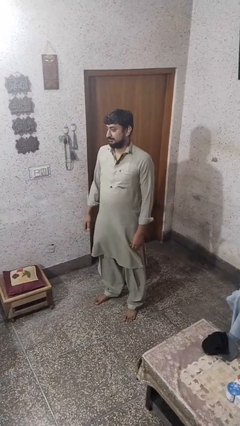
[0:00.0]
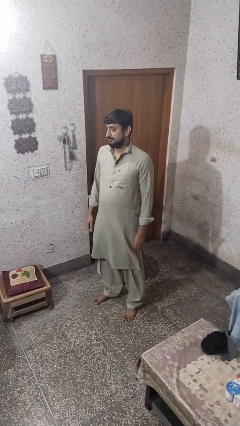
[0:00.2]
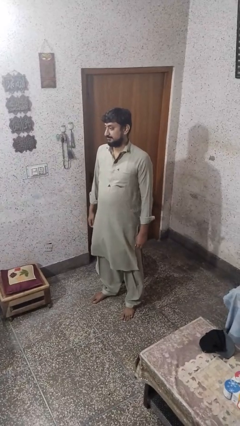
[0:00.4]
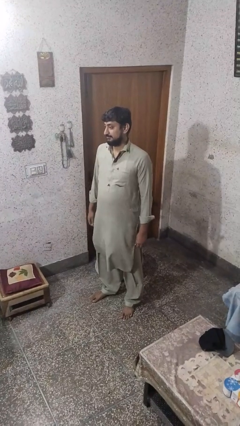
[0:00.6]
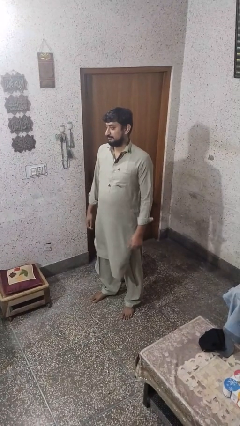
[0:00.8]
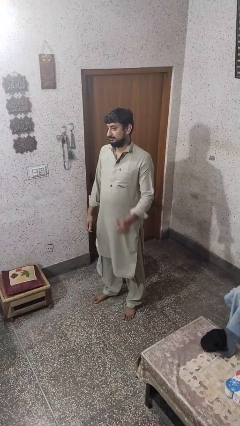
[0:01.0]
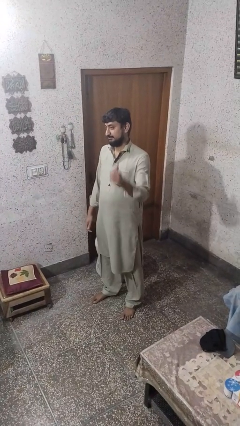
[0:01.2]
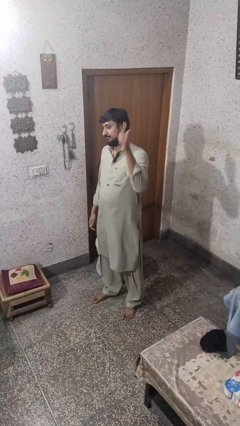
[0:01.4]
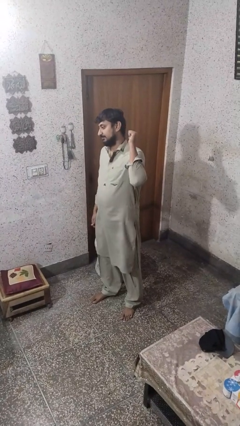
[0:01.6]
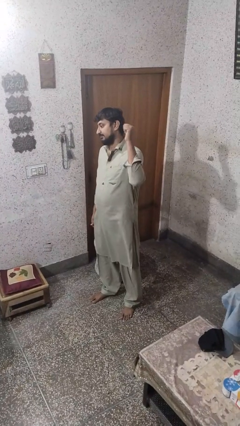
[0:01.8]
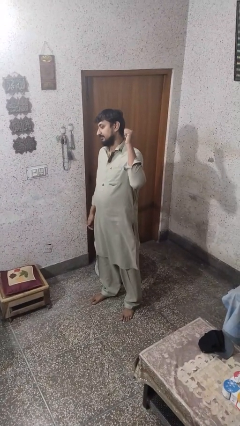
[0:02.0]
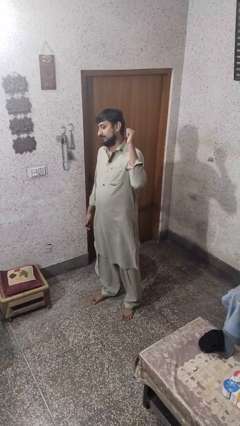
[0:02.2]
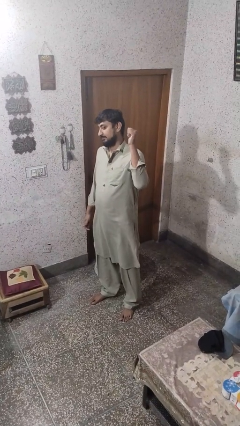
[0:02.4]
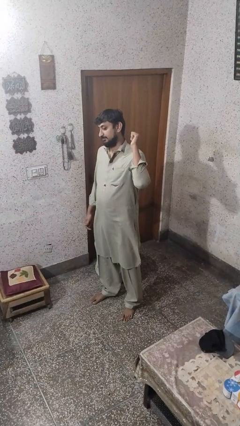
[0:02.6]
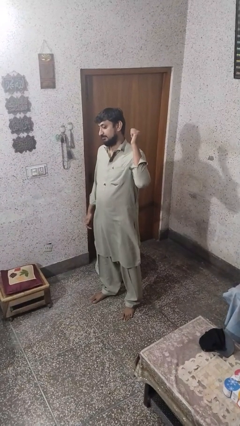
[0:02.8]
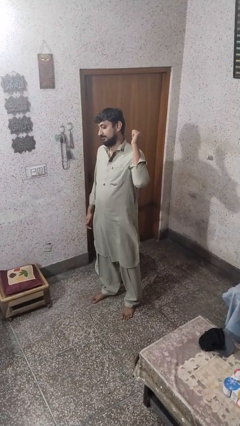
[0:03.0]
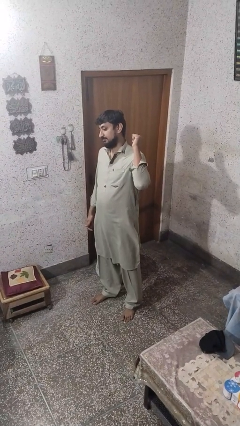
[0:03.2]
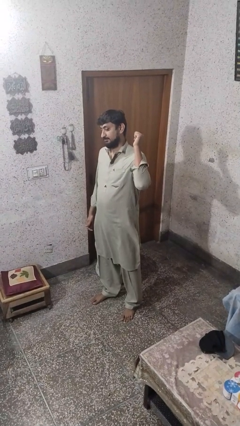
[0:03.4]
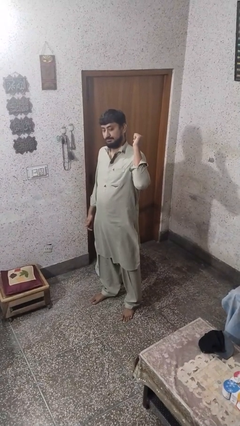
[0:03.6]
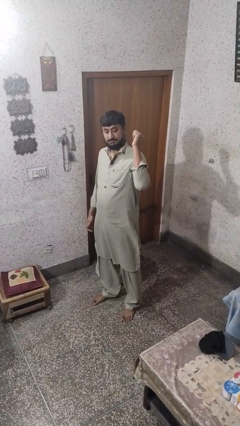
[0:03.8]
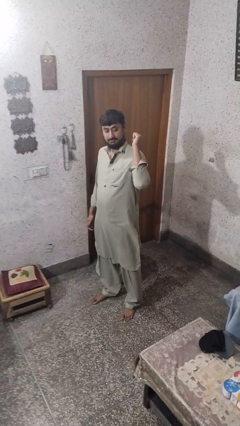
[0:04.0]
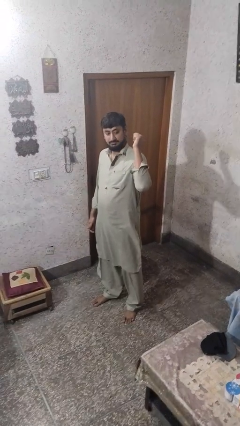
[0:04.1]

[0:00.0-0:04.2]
person gestures behind me

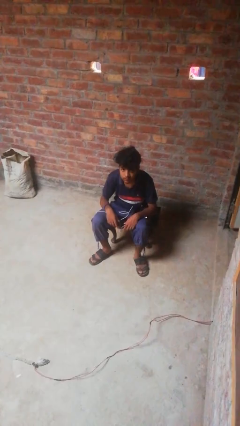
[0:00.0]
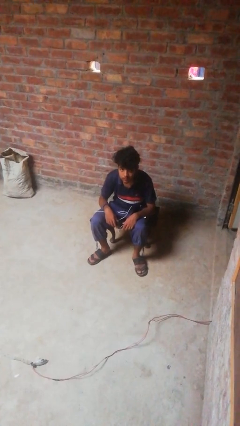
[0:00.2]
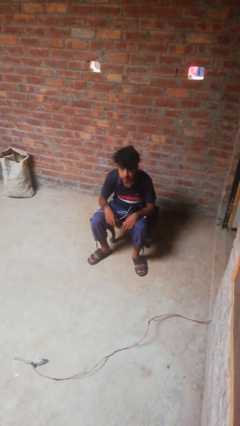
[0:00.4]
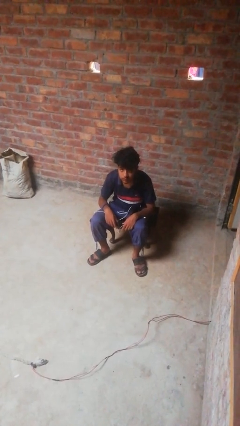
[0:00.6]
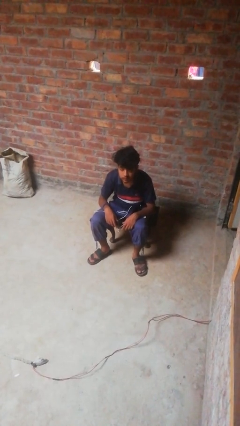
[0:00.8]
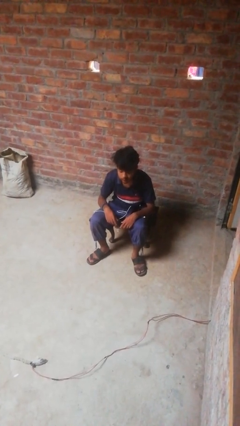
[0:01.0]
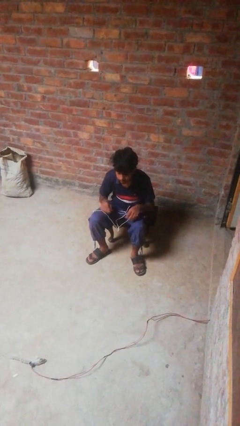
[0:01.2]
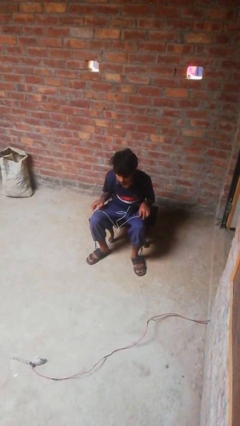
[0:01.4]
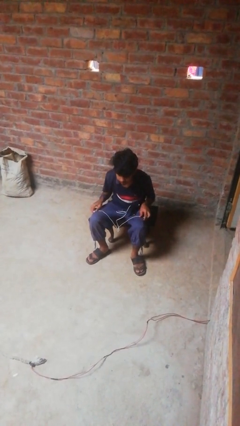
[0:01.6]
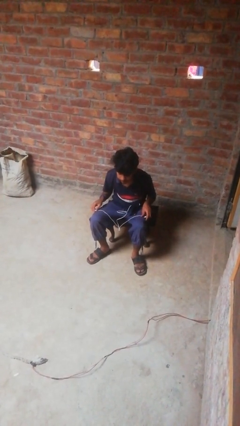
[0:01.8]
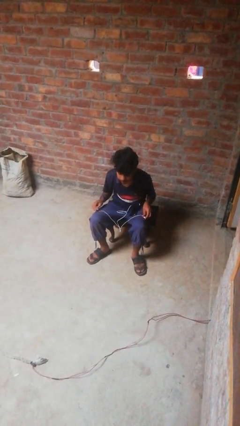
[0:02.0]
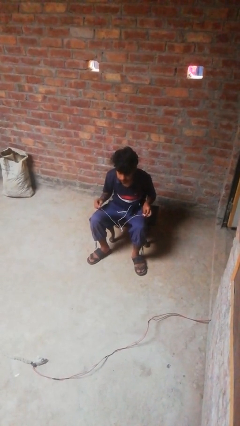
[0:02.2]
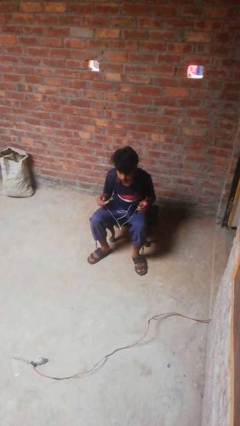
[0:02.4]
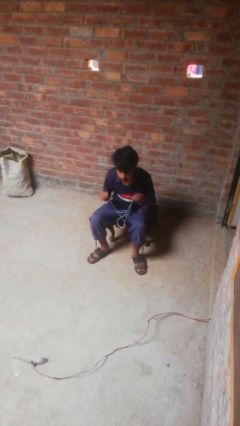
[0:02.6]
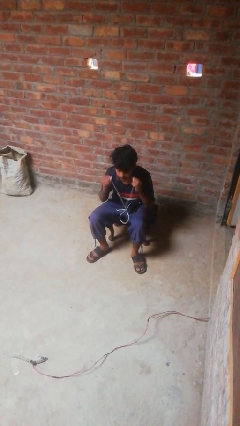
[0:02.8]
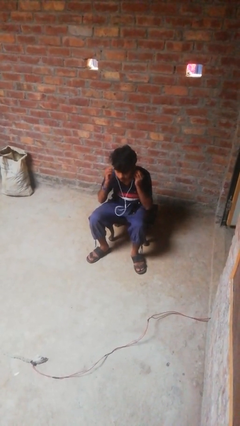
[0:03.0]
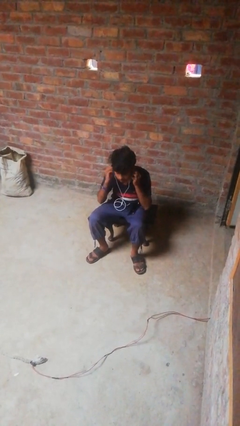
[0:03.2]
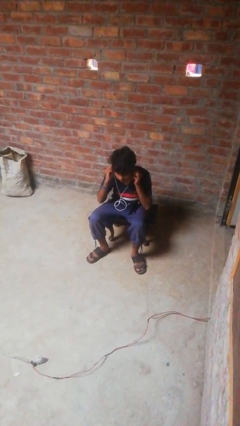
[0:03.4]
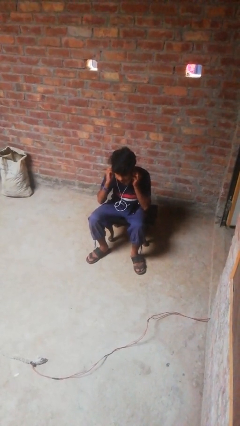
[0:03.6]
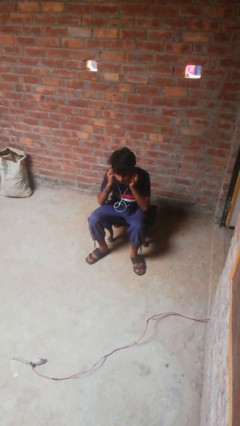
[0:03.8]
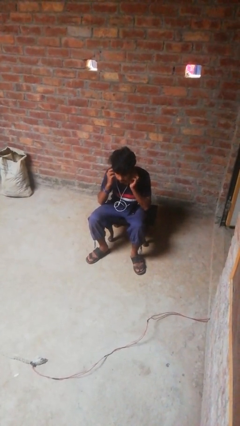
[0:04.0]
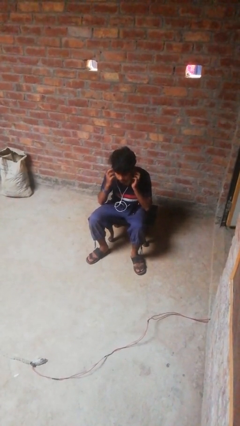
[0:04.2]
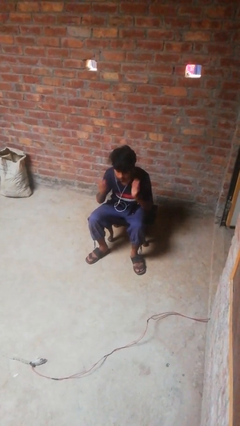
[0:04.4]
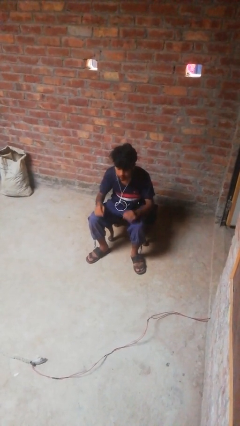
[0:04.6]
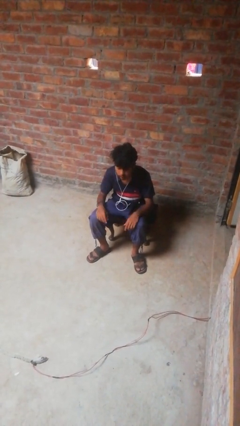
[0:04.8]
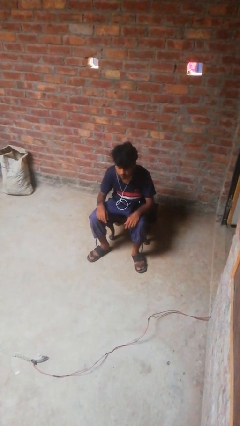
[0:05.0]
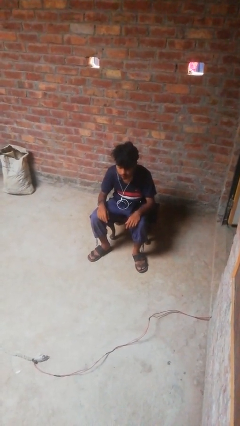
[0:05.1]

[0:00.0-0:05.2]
person puts on headphones

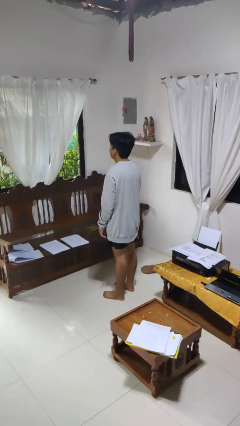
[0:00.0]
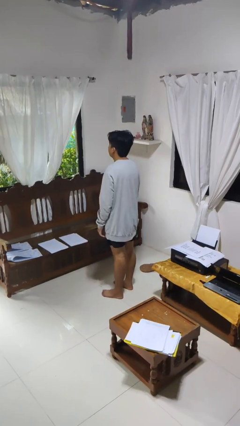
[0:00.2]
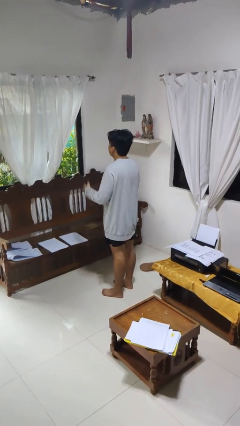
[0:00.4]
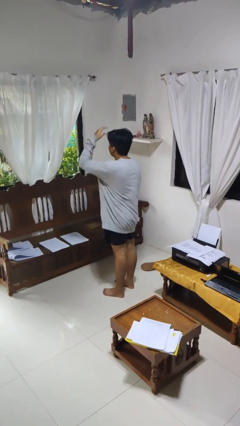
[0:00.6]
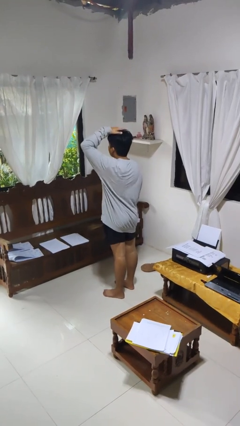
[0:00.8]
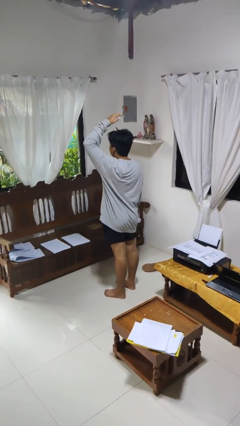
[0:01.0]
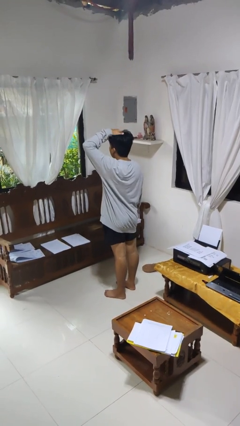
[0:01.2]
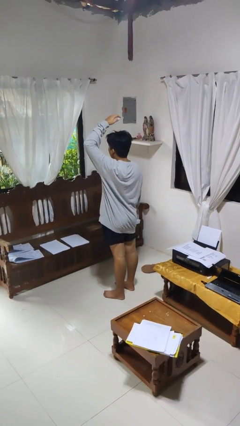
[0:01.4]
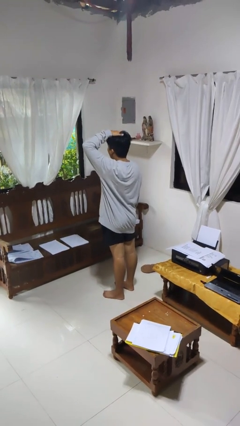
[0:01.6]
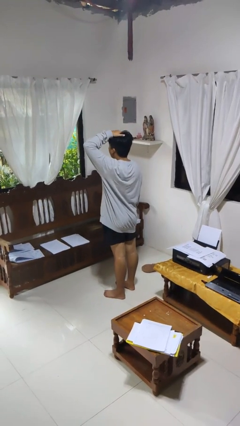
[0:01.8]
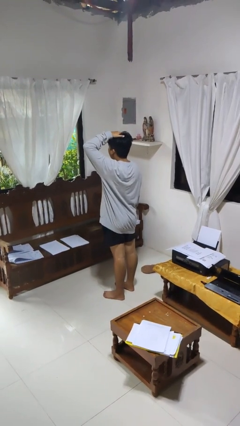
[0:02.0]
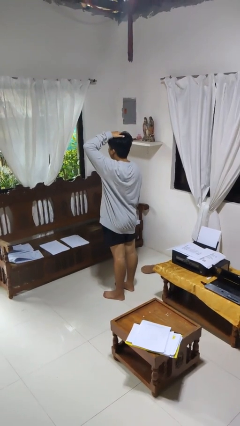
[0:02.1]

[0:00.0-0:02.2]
person pats head

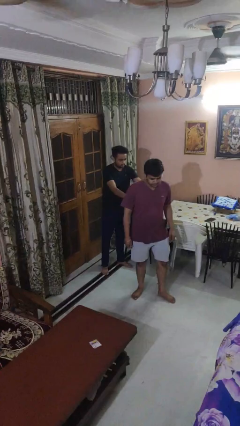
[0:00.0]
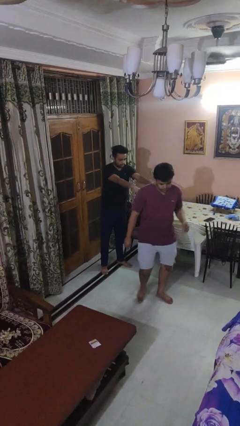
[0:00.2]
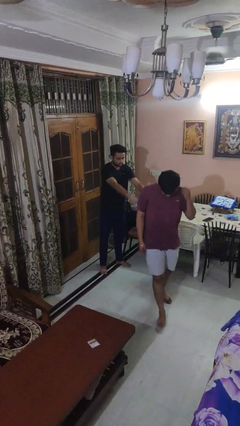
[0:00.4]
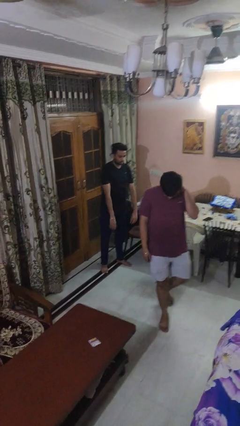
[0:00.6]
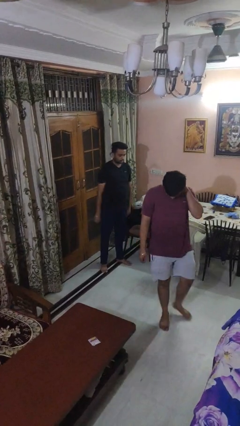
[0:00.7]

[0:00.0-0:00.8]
person shoves person

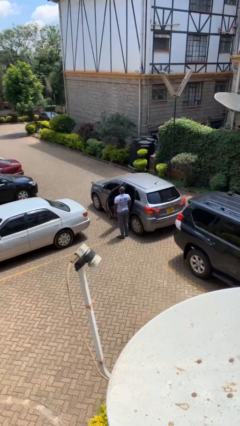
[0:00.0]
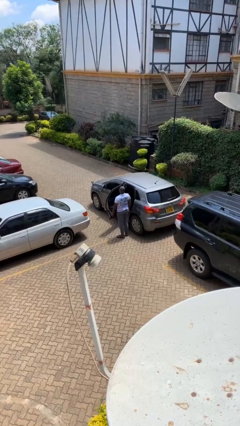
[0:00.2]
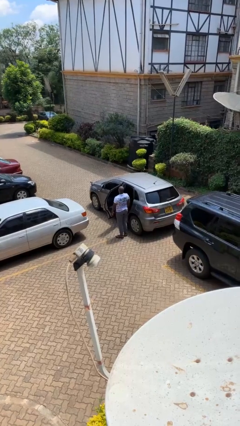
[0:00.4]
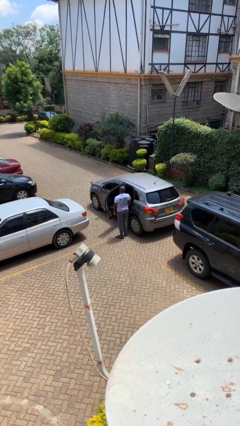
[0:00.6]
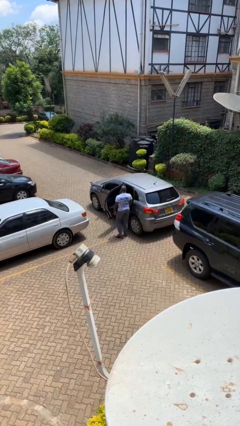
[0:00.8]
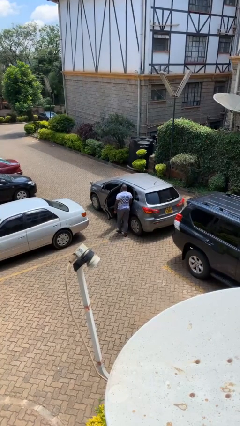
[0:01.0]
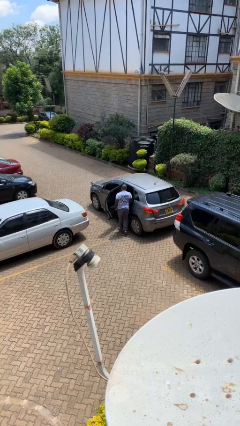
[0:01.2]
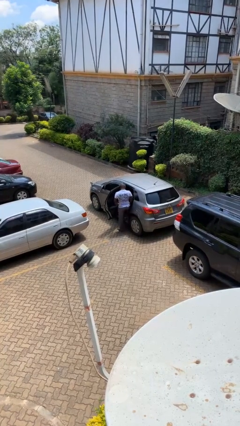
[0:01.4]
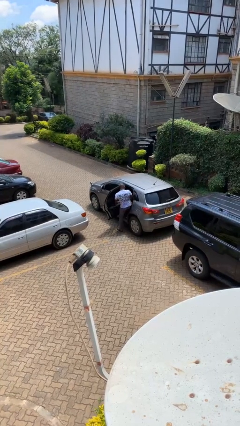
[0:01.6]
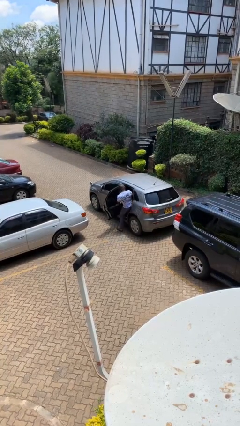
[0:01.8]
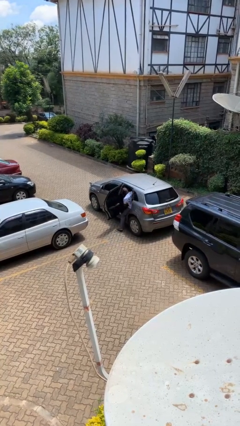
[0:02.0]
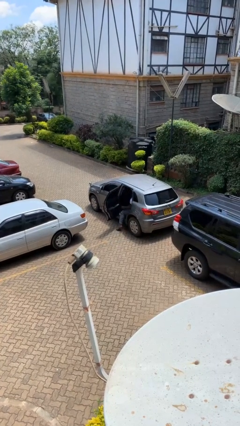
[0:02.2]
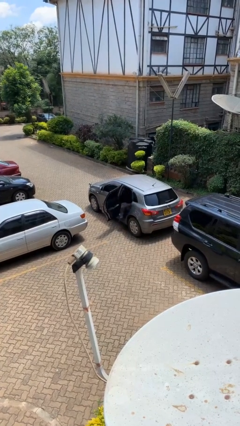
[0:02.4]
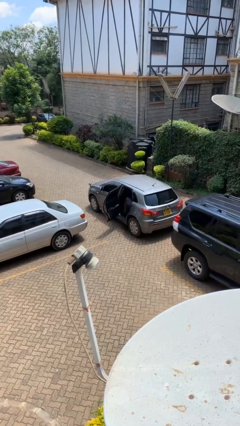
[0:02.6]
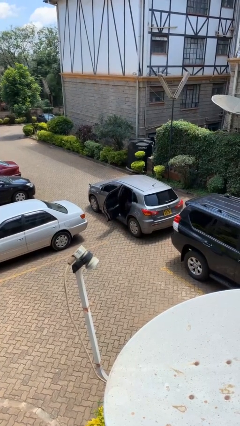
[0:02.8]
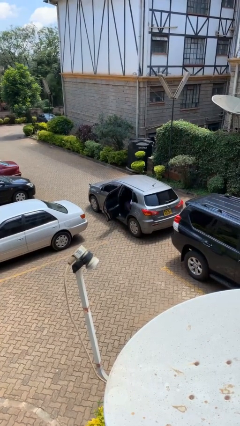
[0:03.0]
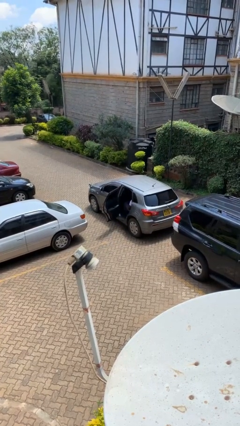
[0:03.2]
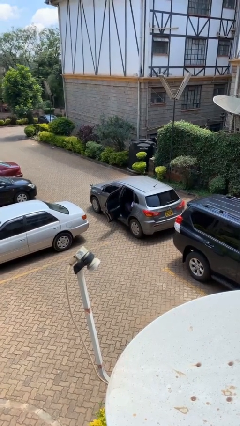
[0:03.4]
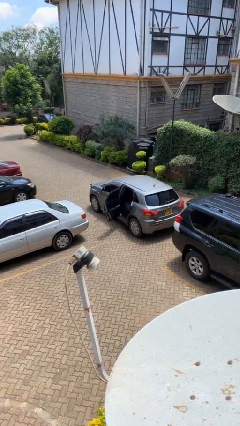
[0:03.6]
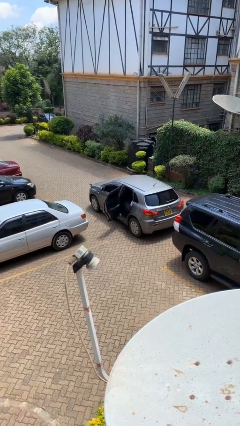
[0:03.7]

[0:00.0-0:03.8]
person enters car

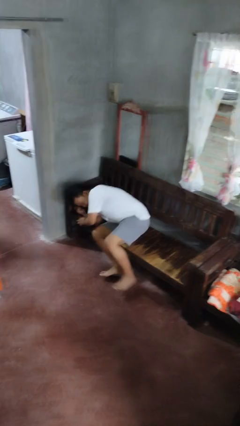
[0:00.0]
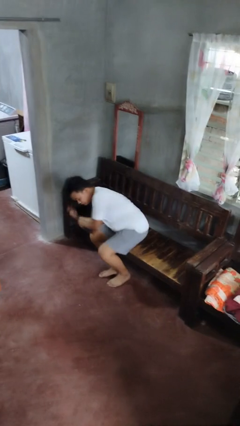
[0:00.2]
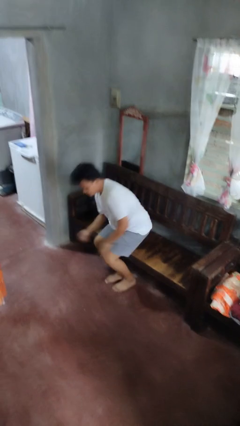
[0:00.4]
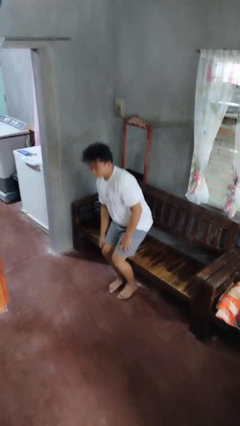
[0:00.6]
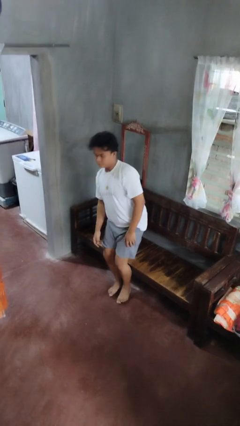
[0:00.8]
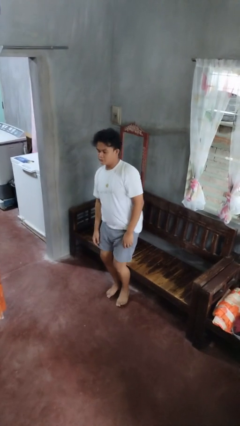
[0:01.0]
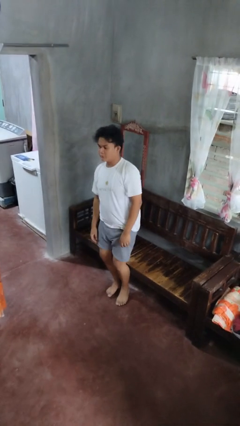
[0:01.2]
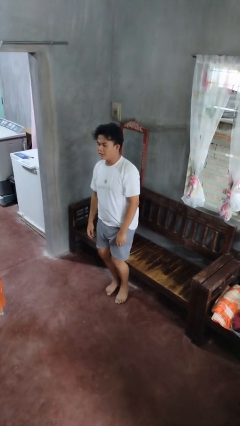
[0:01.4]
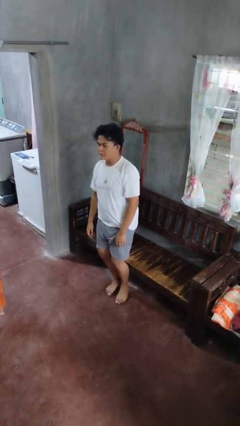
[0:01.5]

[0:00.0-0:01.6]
person stands up
